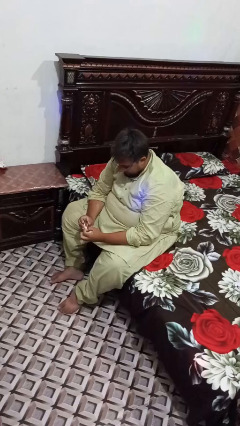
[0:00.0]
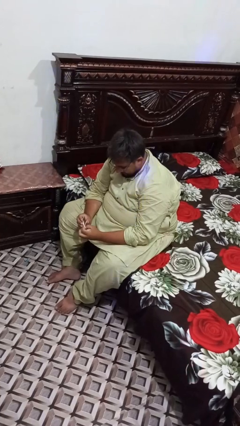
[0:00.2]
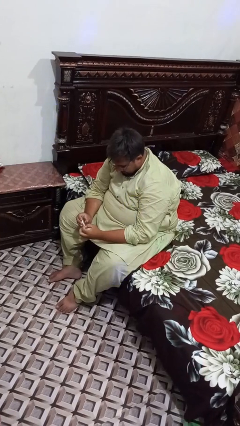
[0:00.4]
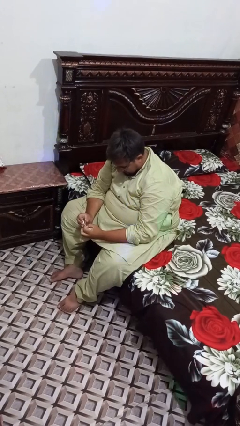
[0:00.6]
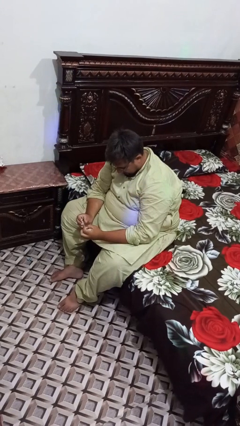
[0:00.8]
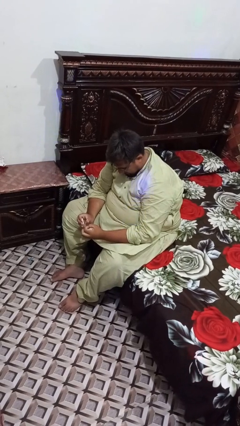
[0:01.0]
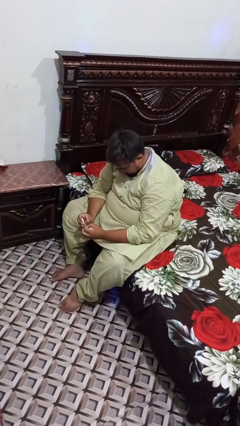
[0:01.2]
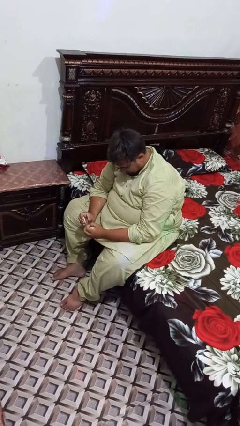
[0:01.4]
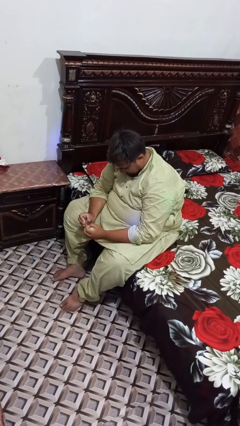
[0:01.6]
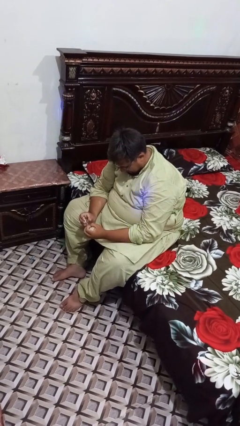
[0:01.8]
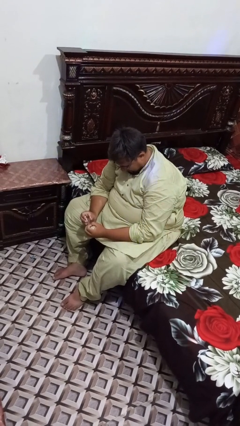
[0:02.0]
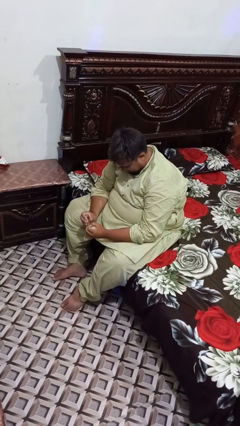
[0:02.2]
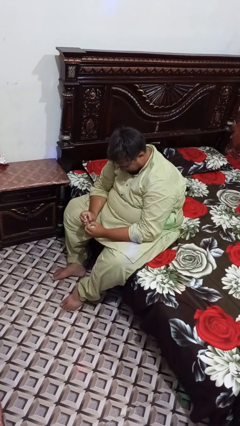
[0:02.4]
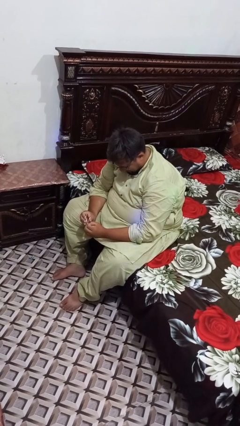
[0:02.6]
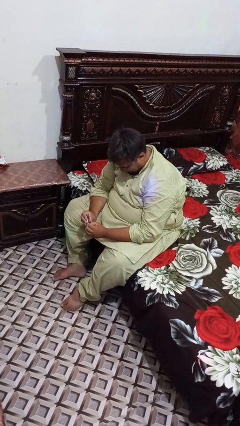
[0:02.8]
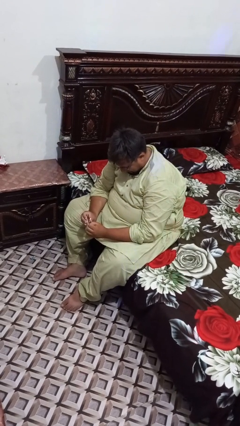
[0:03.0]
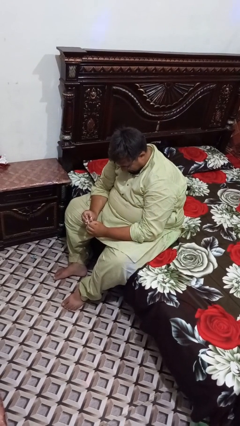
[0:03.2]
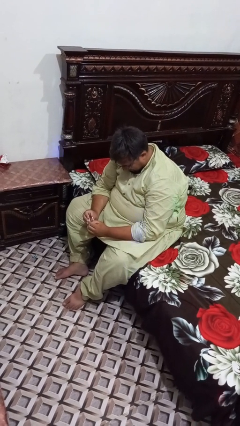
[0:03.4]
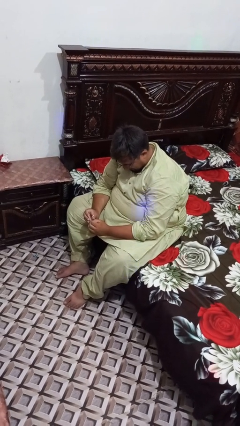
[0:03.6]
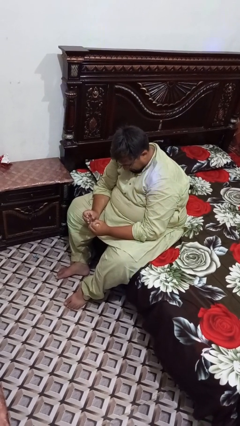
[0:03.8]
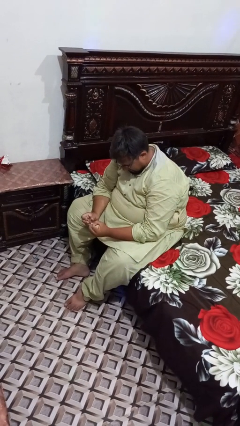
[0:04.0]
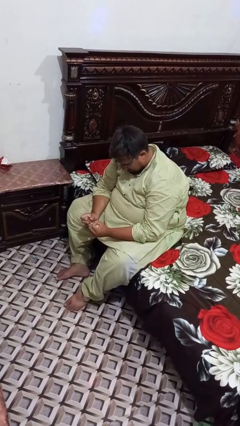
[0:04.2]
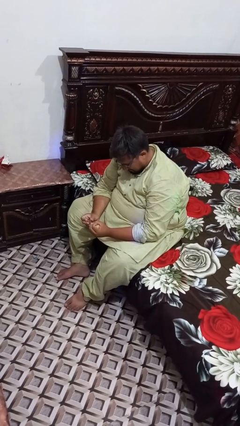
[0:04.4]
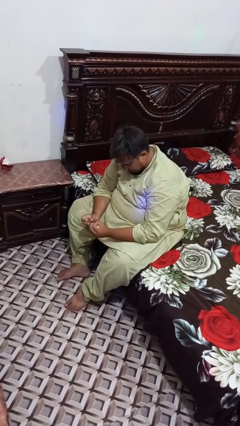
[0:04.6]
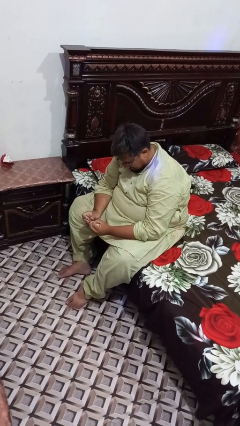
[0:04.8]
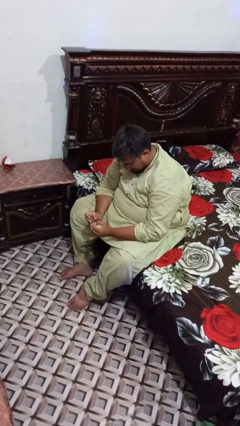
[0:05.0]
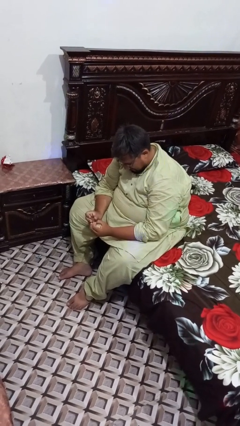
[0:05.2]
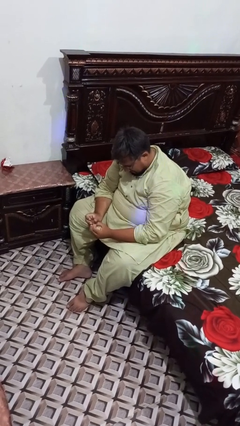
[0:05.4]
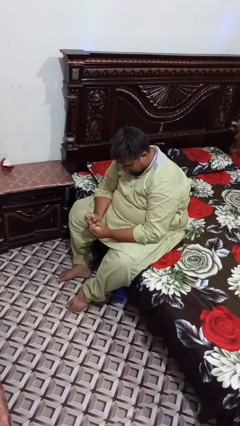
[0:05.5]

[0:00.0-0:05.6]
person files fingernails

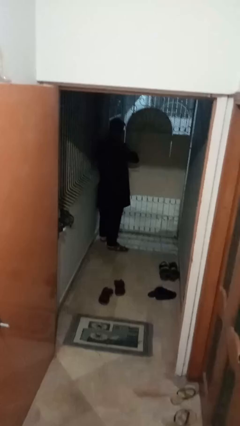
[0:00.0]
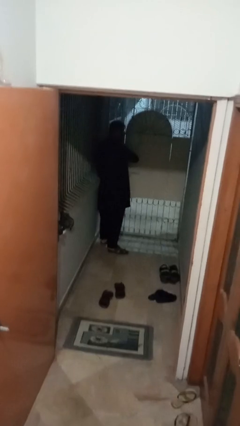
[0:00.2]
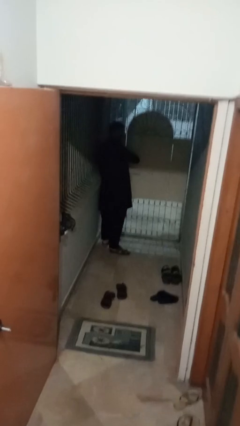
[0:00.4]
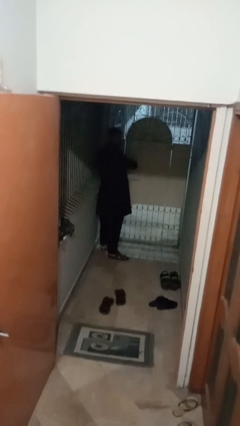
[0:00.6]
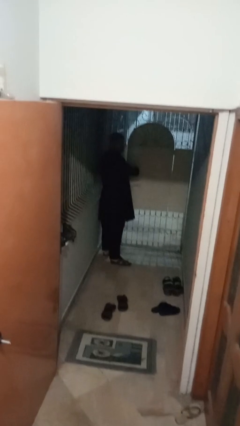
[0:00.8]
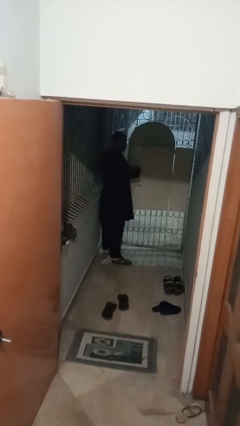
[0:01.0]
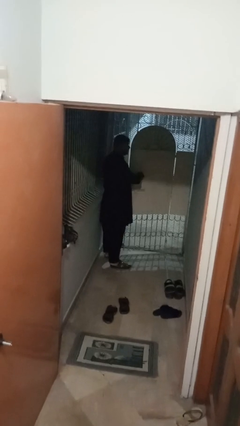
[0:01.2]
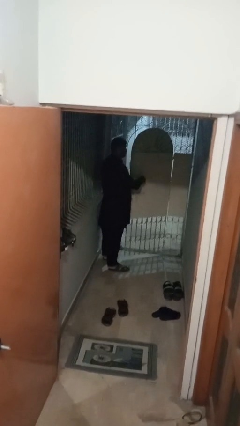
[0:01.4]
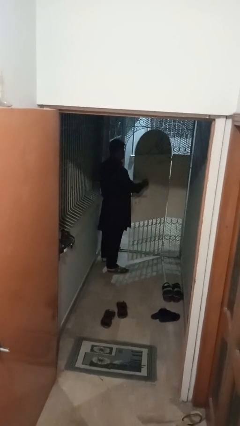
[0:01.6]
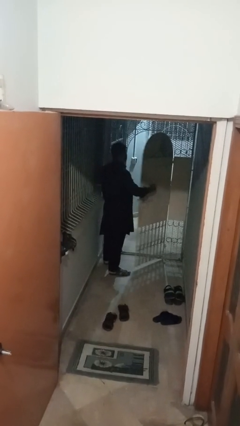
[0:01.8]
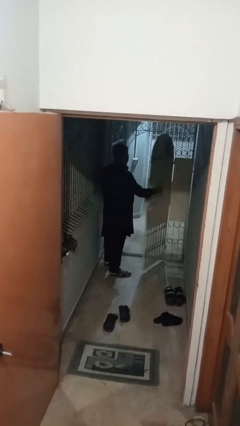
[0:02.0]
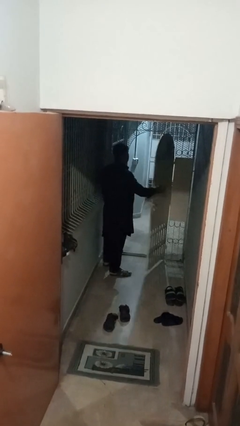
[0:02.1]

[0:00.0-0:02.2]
person opens gate

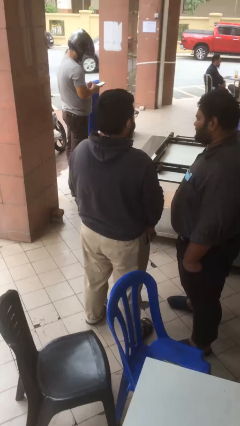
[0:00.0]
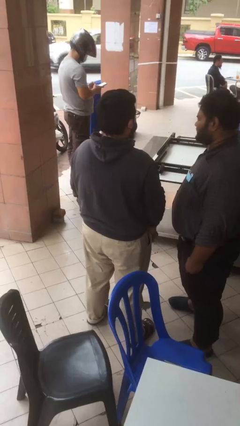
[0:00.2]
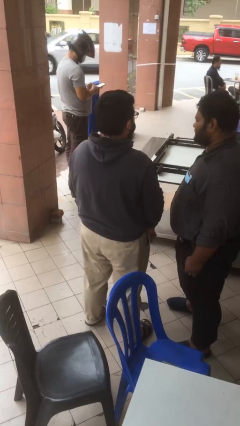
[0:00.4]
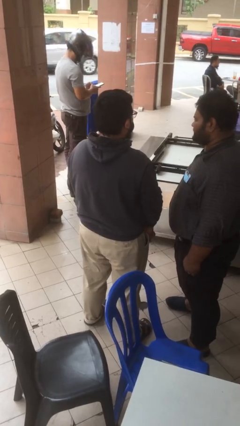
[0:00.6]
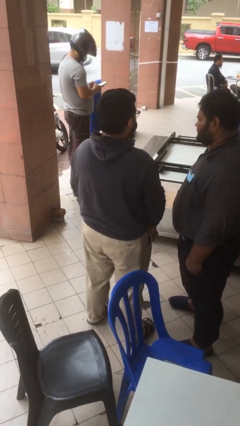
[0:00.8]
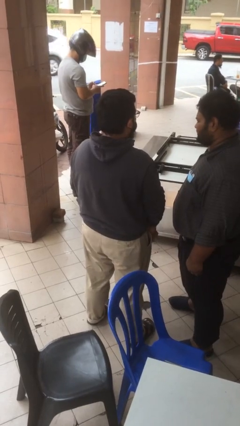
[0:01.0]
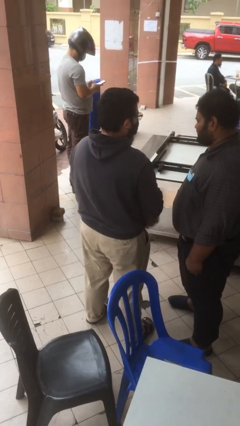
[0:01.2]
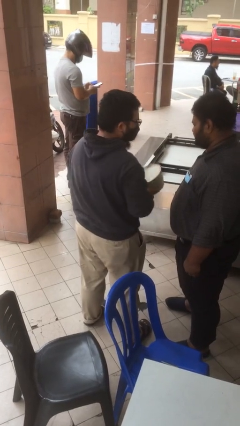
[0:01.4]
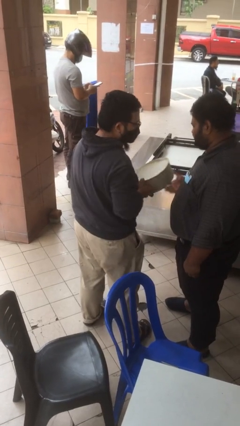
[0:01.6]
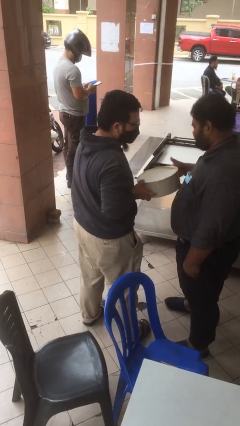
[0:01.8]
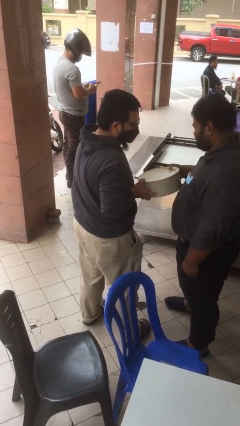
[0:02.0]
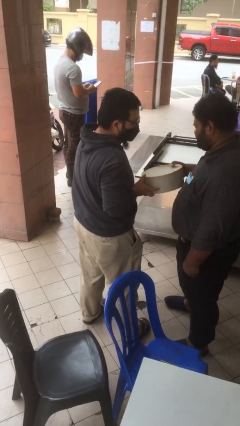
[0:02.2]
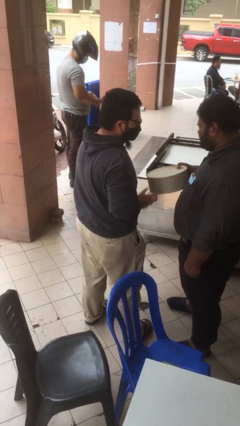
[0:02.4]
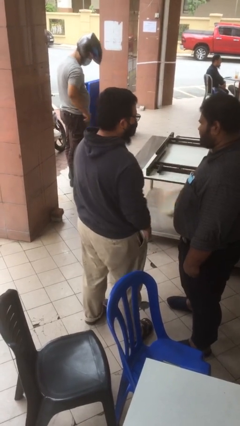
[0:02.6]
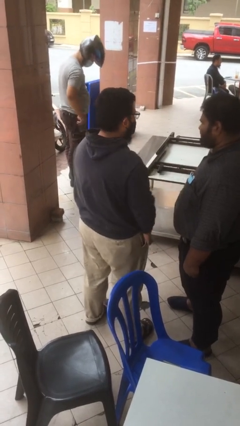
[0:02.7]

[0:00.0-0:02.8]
person transfers object to person

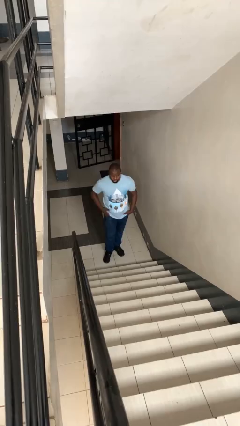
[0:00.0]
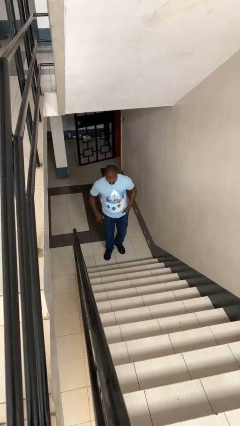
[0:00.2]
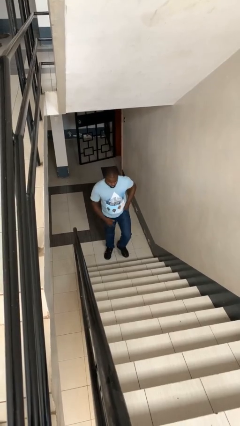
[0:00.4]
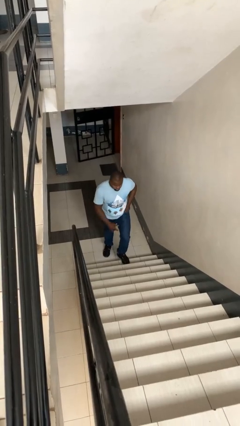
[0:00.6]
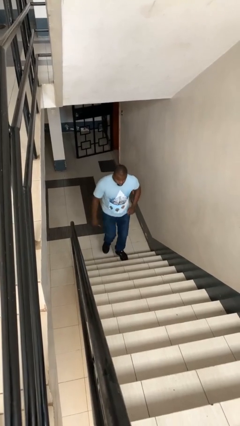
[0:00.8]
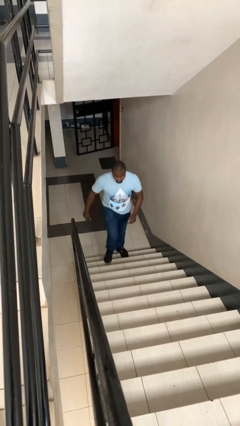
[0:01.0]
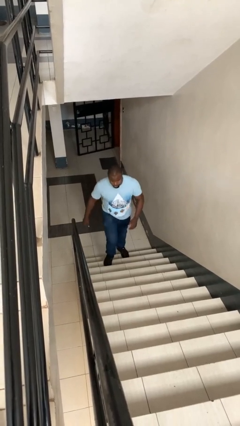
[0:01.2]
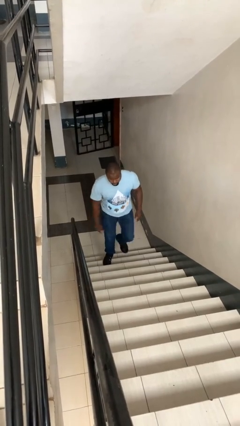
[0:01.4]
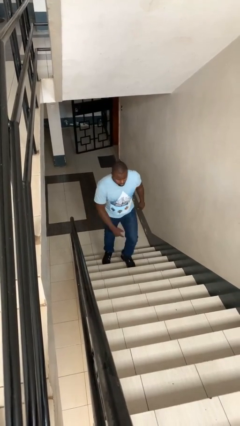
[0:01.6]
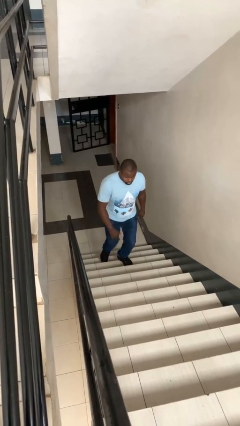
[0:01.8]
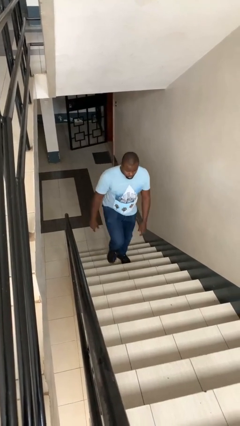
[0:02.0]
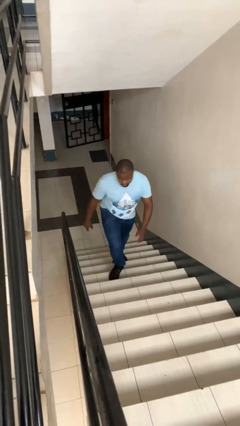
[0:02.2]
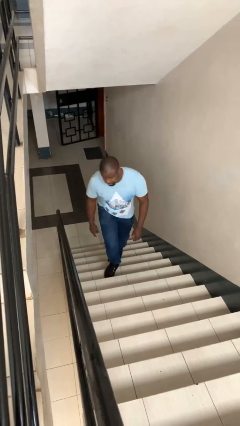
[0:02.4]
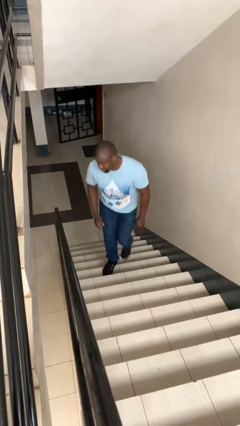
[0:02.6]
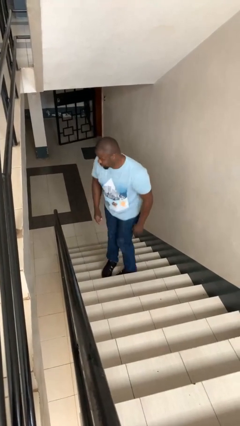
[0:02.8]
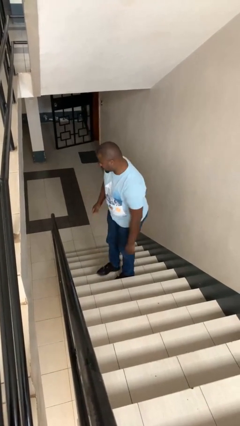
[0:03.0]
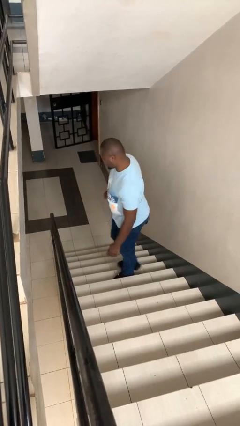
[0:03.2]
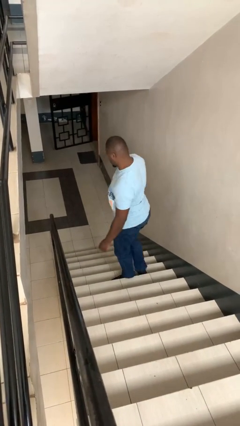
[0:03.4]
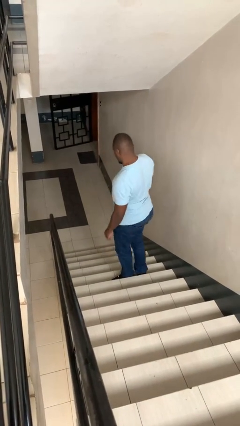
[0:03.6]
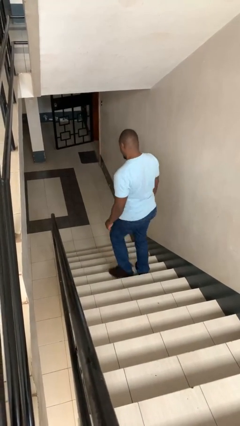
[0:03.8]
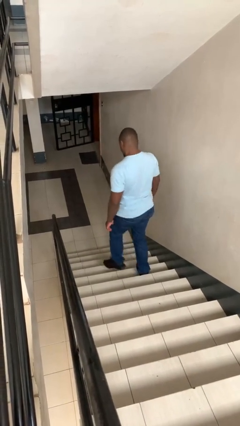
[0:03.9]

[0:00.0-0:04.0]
person climbs up stairs

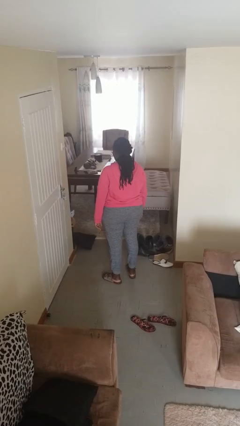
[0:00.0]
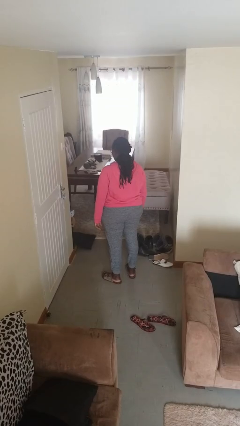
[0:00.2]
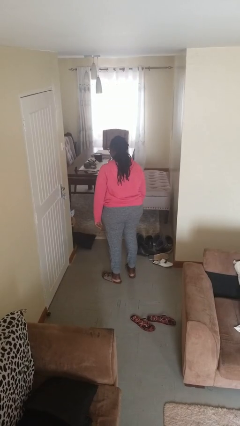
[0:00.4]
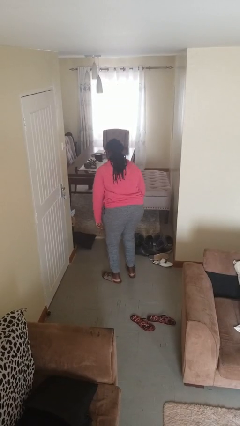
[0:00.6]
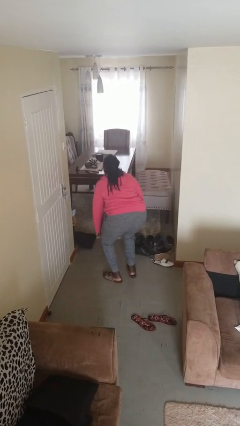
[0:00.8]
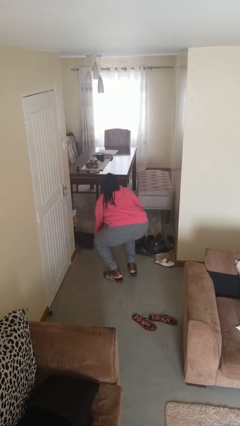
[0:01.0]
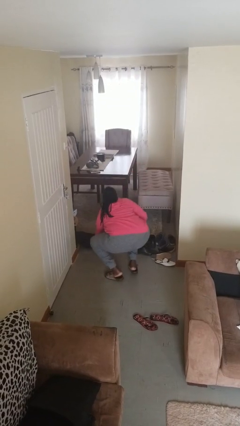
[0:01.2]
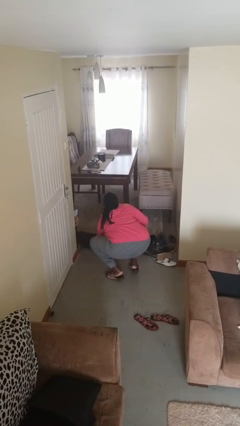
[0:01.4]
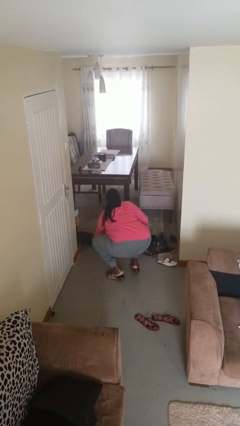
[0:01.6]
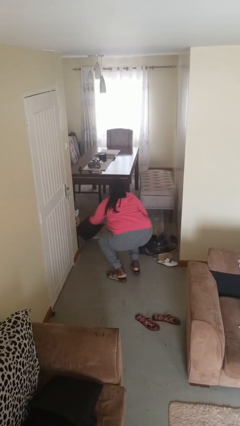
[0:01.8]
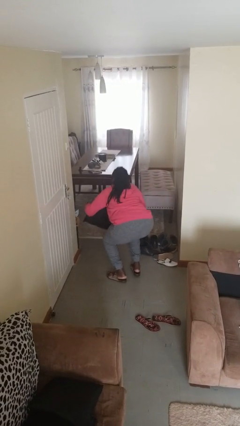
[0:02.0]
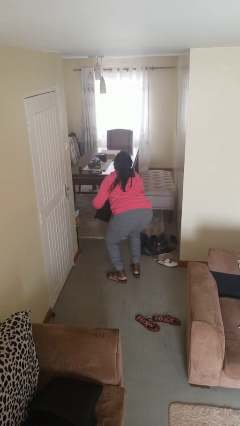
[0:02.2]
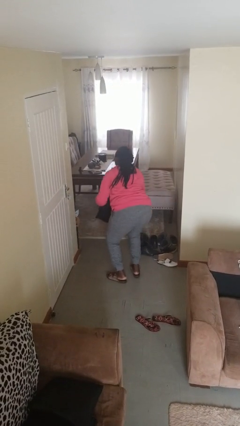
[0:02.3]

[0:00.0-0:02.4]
person picks up object from floor

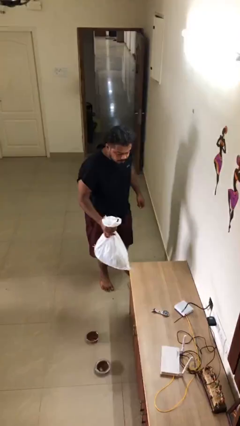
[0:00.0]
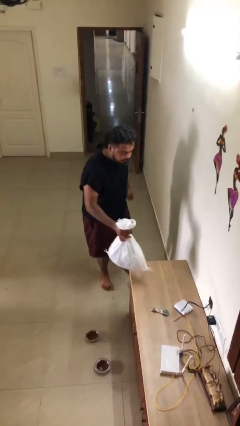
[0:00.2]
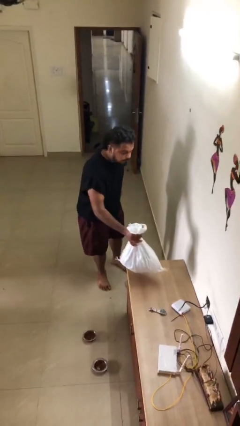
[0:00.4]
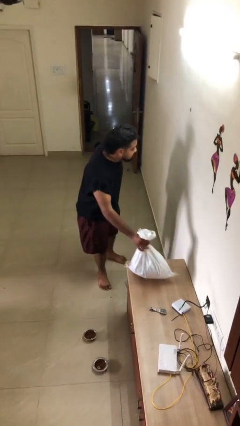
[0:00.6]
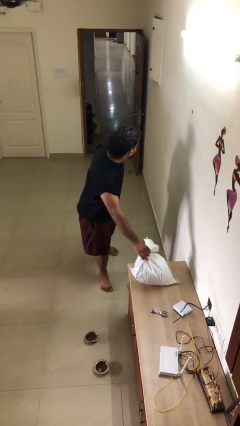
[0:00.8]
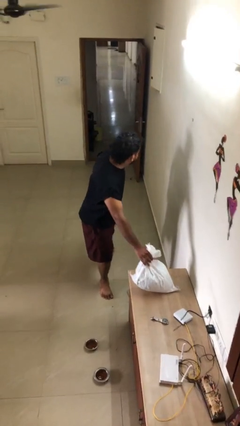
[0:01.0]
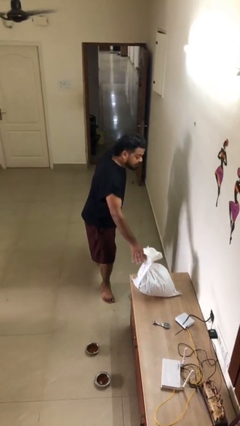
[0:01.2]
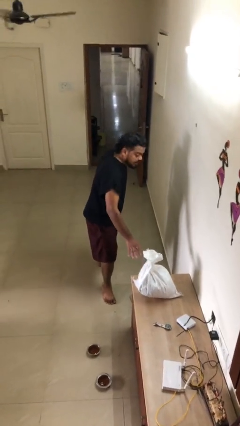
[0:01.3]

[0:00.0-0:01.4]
person puts down object on table
